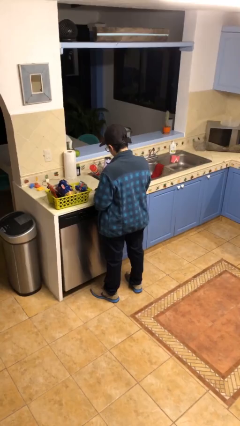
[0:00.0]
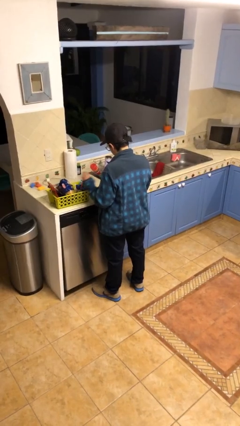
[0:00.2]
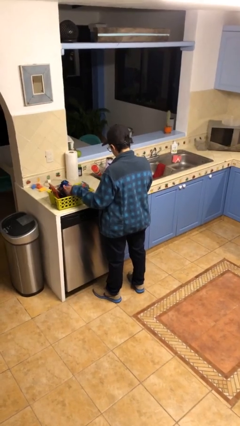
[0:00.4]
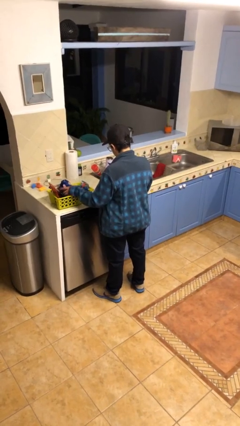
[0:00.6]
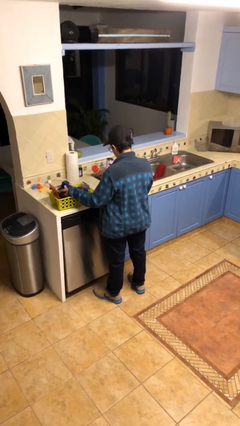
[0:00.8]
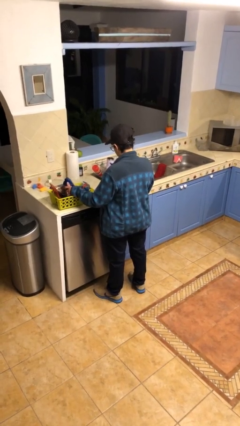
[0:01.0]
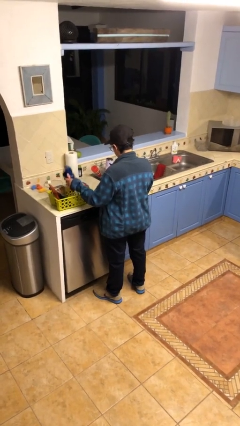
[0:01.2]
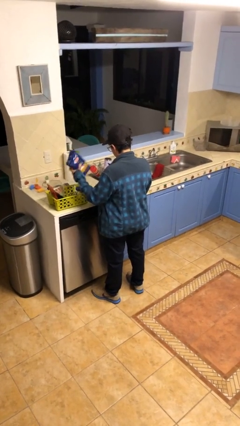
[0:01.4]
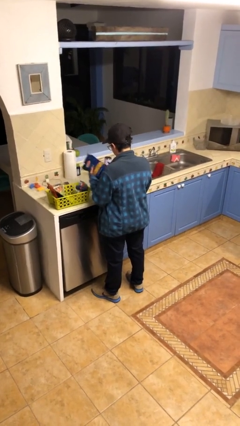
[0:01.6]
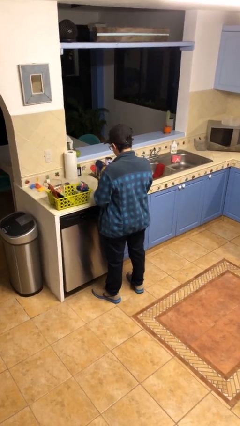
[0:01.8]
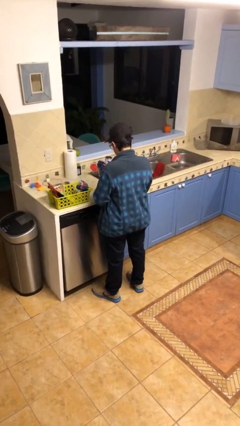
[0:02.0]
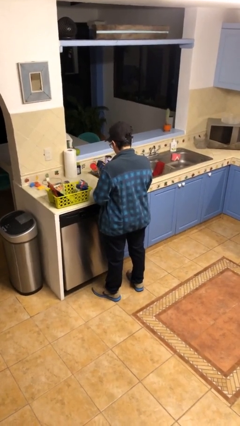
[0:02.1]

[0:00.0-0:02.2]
person takes object from basket

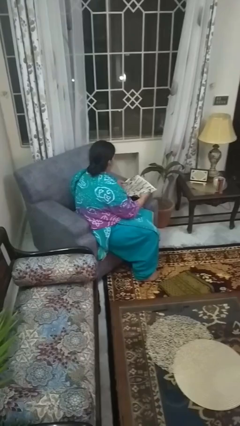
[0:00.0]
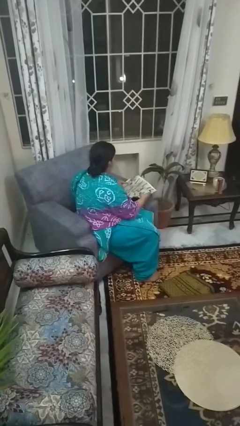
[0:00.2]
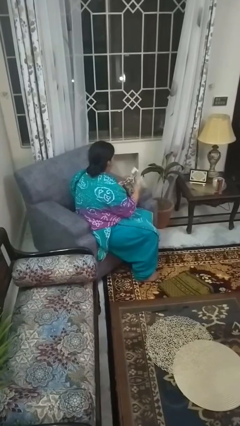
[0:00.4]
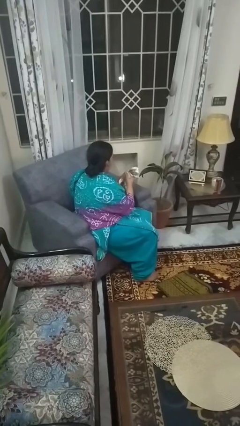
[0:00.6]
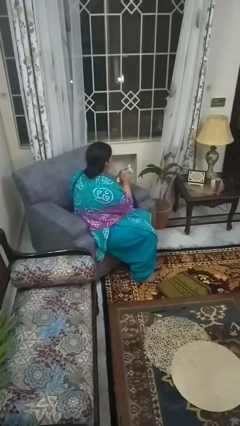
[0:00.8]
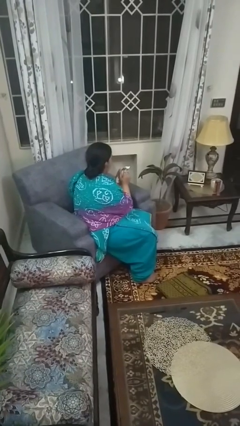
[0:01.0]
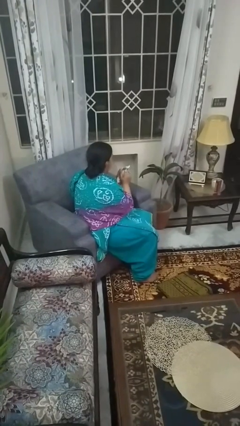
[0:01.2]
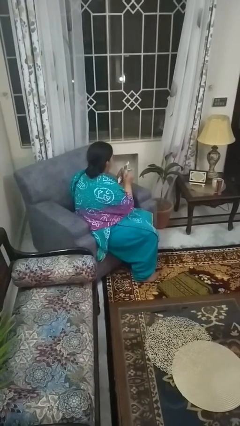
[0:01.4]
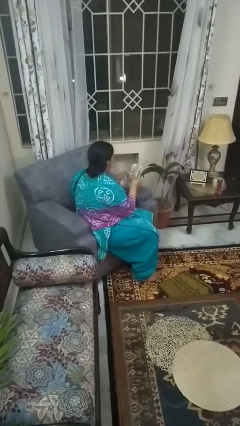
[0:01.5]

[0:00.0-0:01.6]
person crumples paper

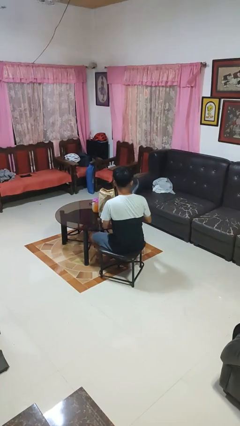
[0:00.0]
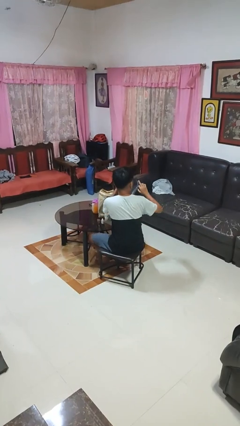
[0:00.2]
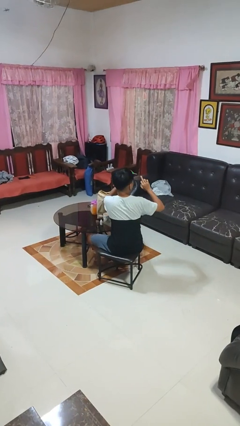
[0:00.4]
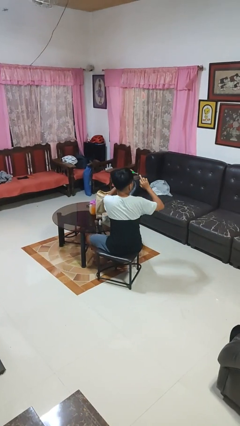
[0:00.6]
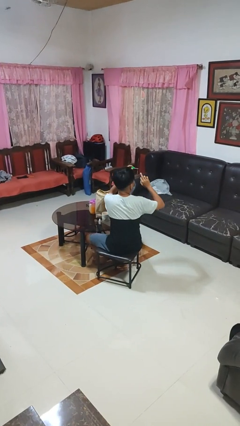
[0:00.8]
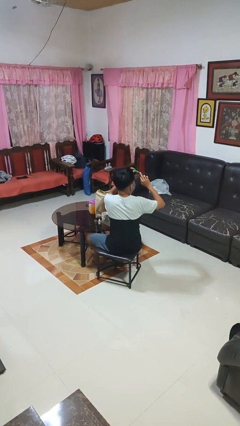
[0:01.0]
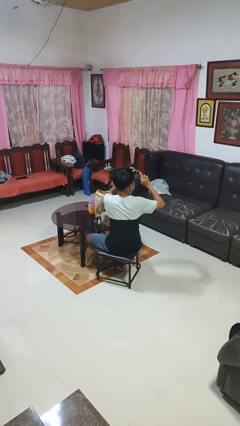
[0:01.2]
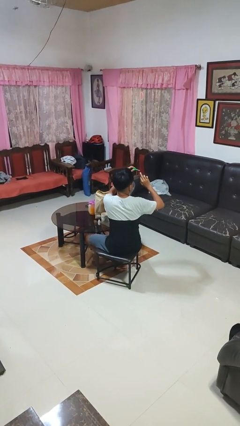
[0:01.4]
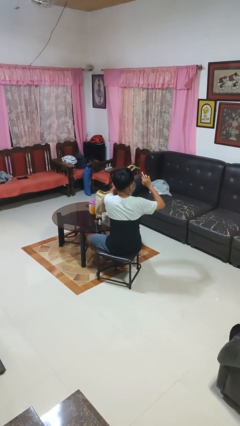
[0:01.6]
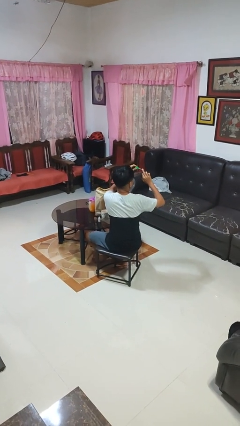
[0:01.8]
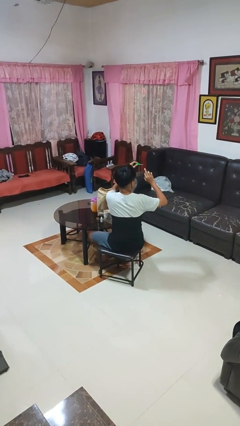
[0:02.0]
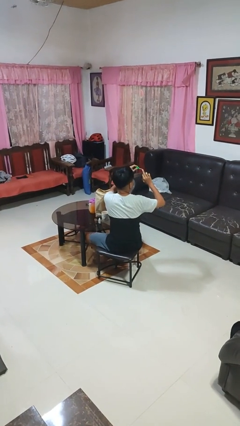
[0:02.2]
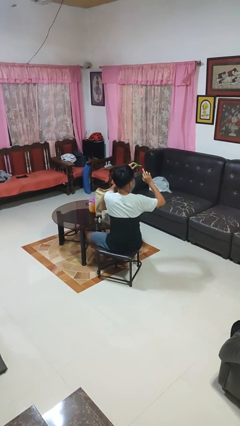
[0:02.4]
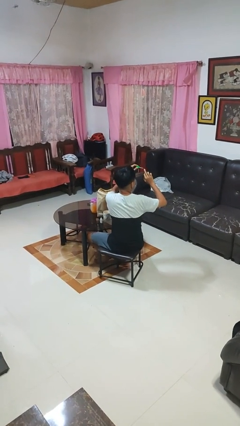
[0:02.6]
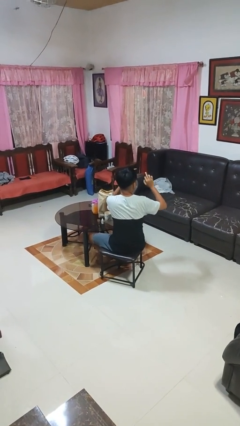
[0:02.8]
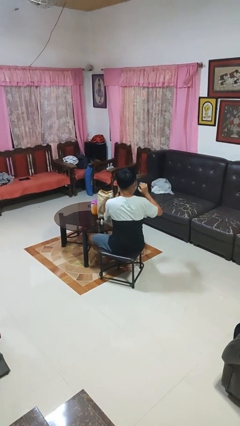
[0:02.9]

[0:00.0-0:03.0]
person paints fingernails

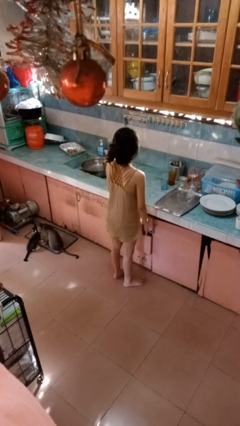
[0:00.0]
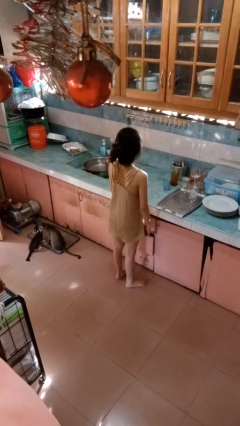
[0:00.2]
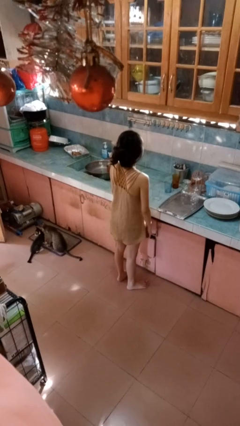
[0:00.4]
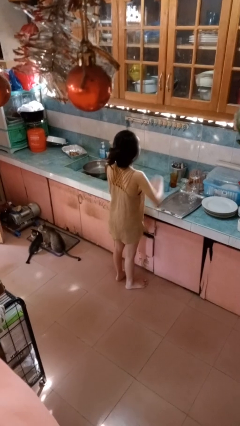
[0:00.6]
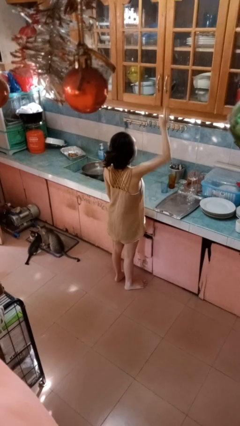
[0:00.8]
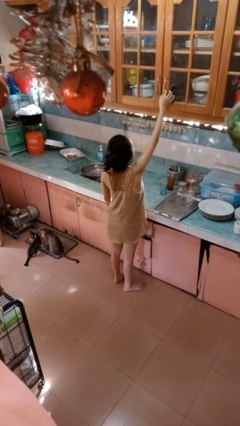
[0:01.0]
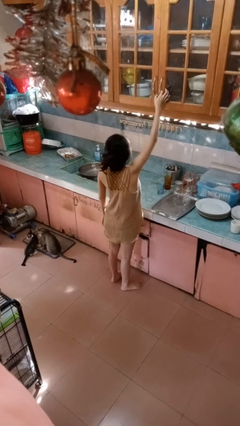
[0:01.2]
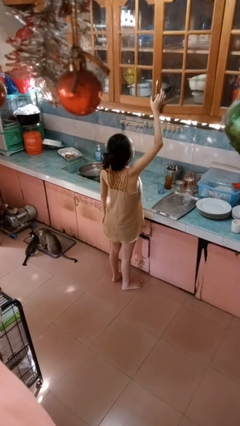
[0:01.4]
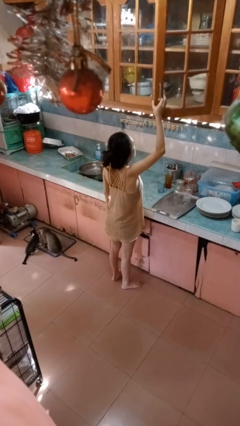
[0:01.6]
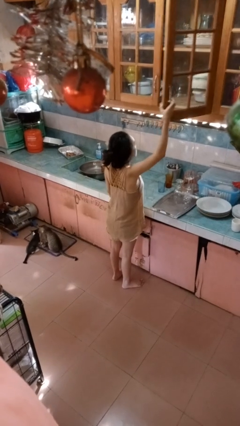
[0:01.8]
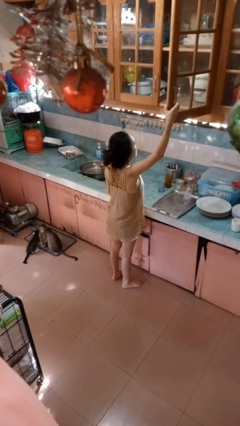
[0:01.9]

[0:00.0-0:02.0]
person opens cabinet

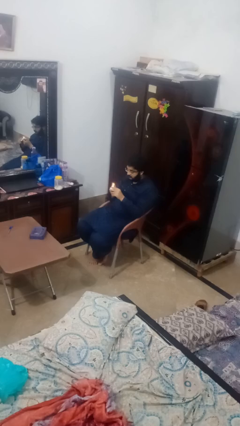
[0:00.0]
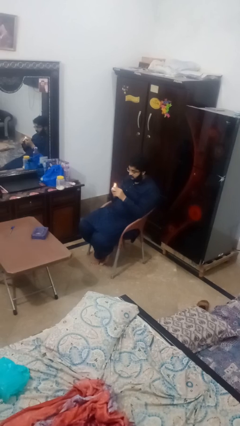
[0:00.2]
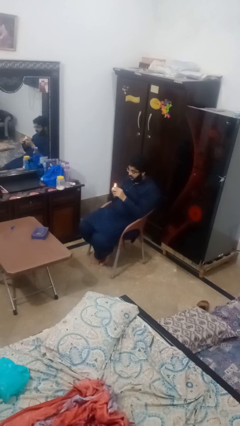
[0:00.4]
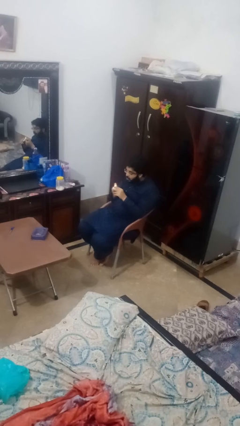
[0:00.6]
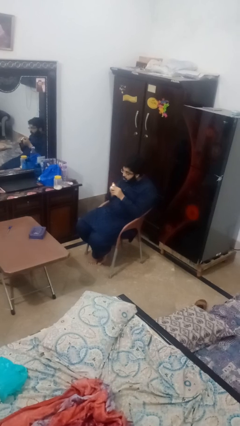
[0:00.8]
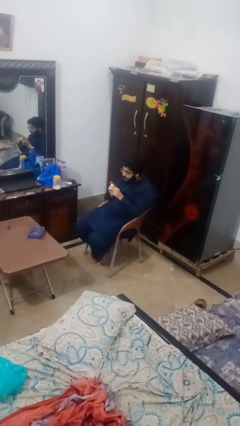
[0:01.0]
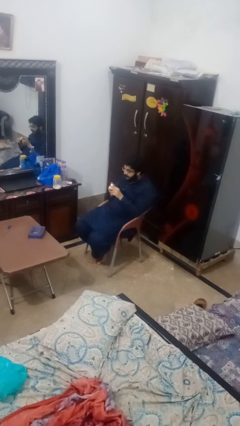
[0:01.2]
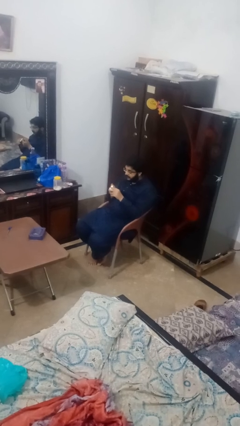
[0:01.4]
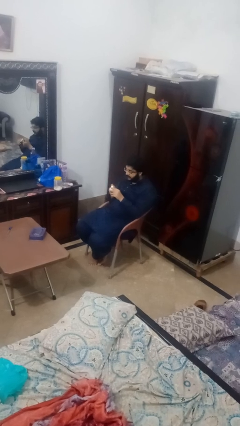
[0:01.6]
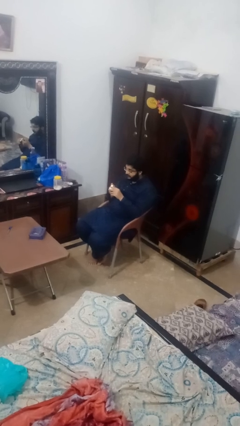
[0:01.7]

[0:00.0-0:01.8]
person extinguishes candle

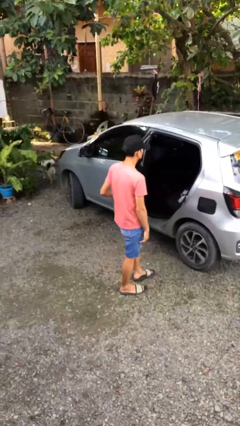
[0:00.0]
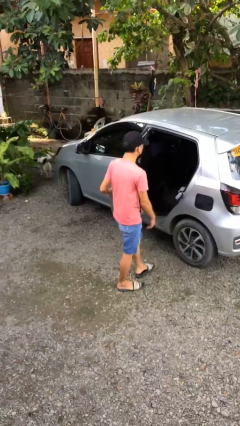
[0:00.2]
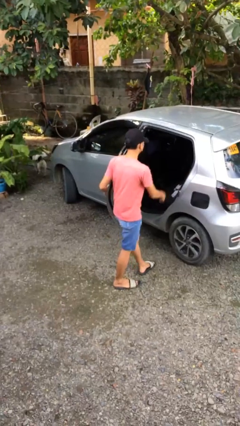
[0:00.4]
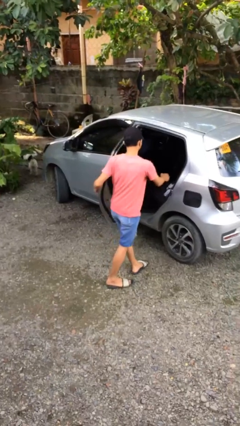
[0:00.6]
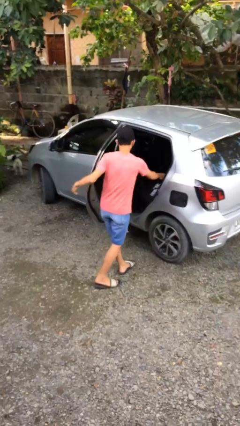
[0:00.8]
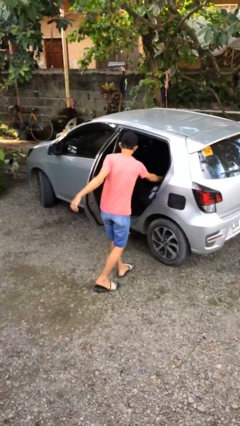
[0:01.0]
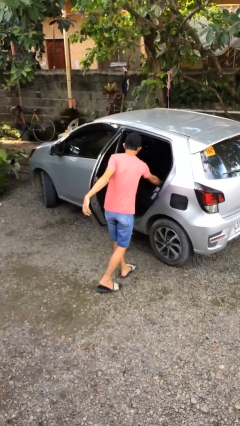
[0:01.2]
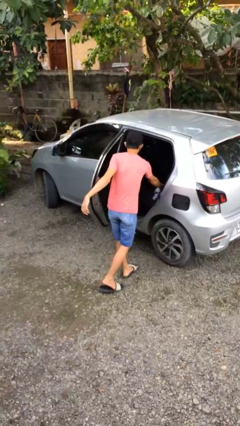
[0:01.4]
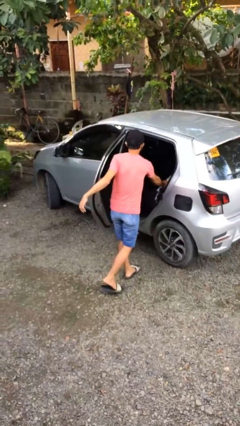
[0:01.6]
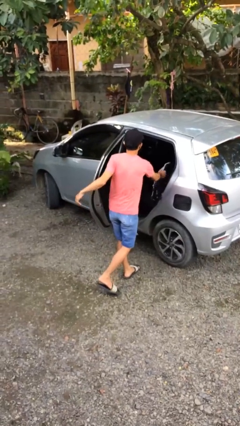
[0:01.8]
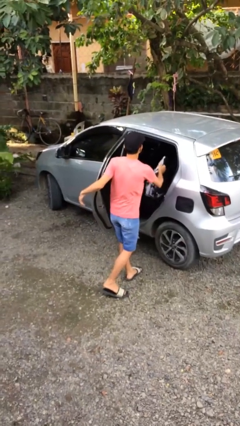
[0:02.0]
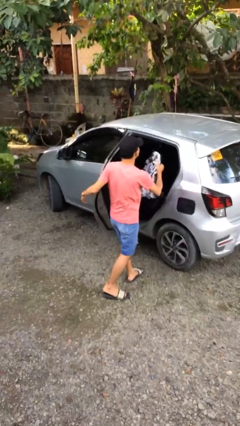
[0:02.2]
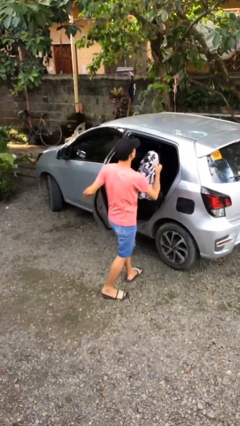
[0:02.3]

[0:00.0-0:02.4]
person unloads car

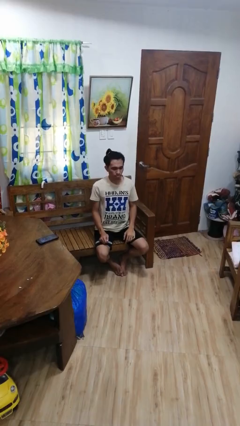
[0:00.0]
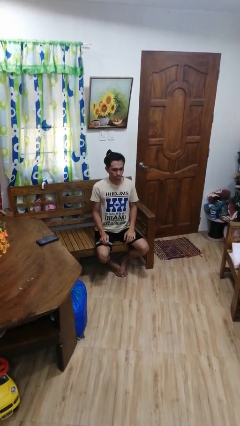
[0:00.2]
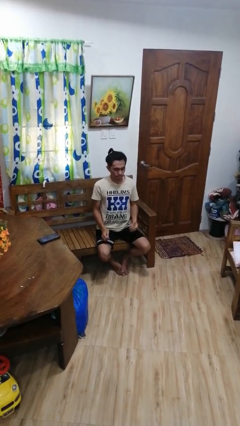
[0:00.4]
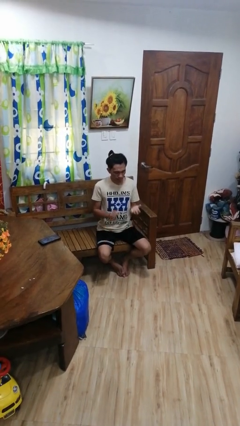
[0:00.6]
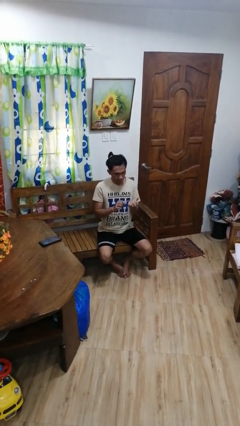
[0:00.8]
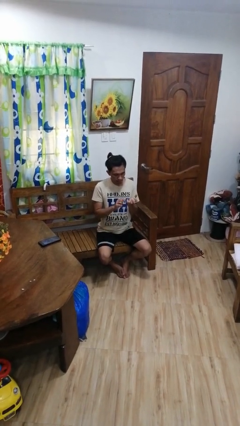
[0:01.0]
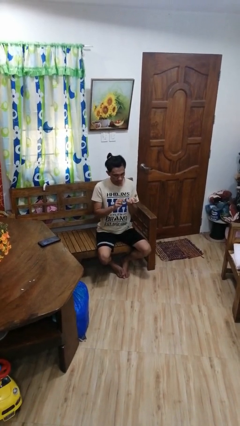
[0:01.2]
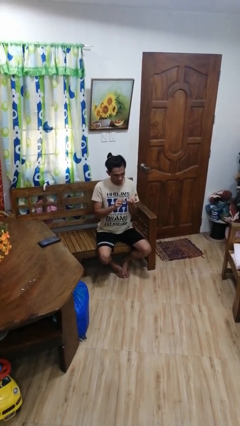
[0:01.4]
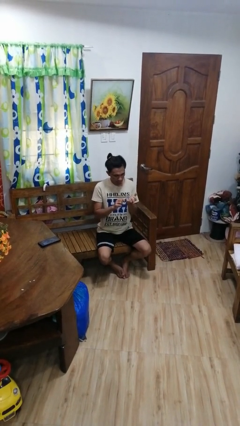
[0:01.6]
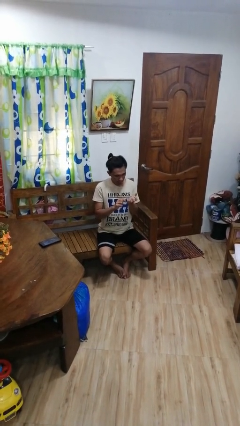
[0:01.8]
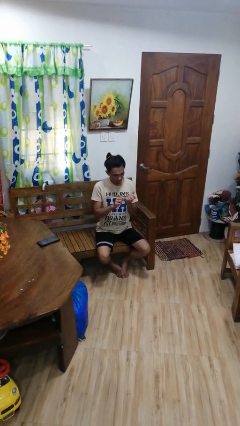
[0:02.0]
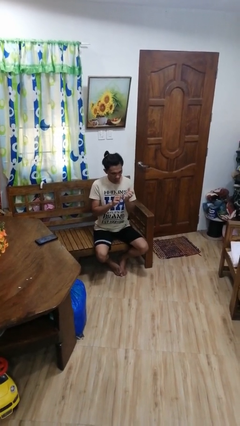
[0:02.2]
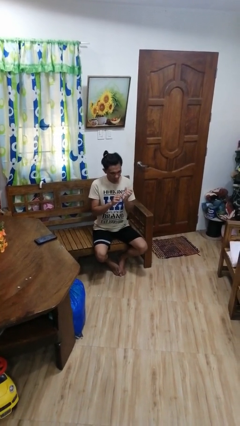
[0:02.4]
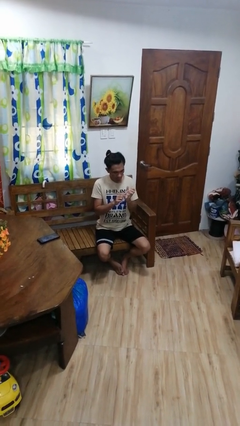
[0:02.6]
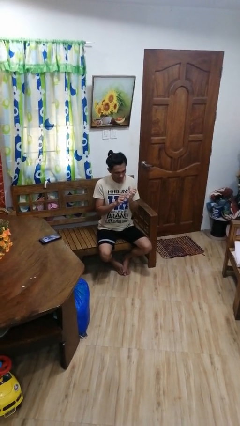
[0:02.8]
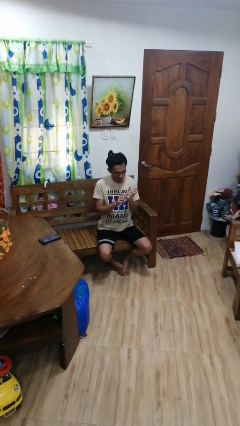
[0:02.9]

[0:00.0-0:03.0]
person files fingernails

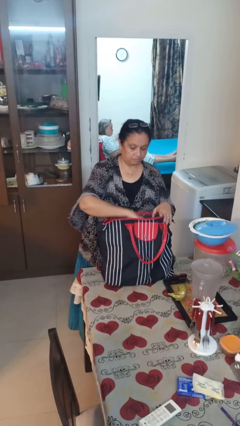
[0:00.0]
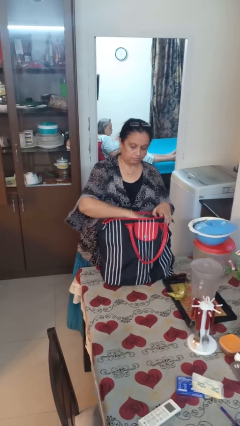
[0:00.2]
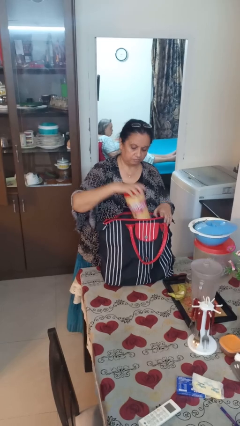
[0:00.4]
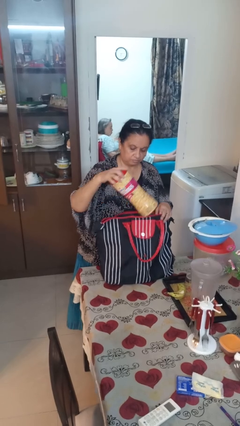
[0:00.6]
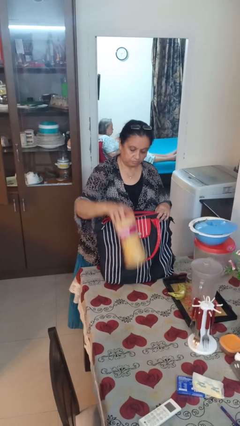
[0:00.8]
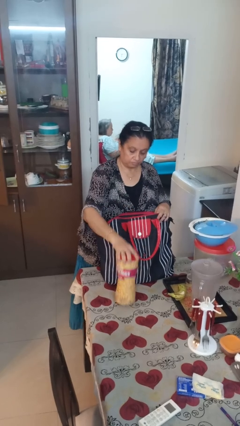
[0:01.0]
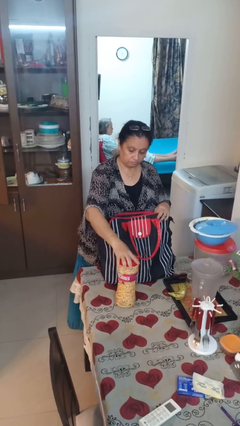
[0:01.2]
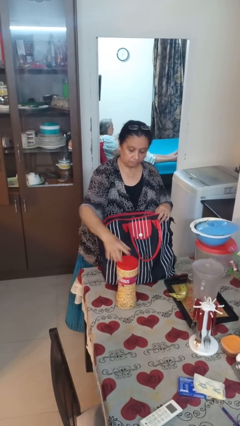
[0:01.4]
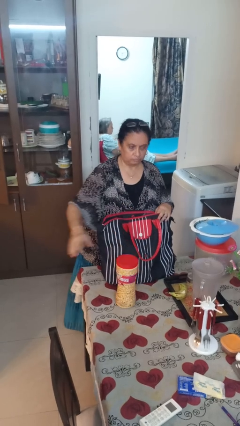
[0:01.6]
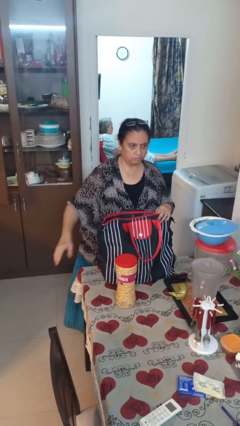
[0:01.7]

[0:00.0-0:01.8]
person takes object from bag
